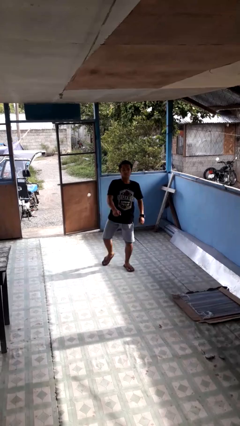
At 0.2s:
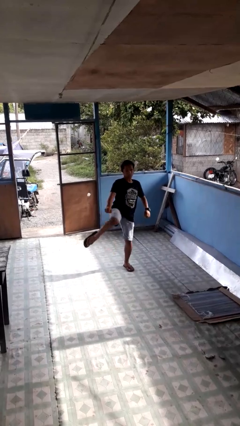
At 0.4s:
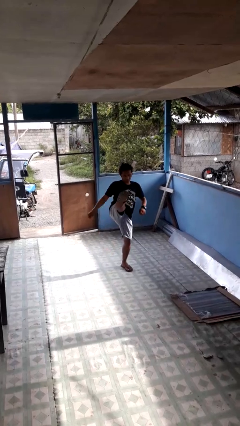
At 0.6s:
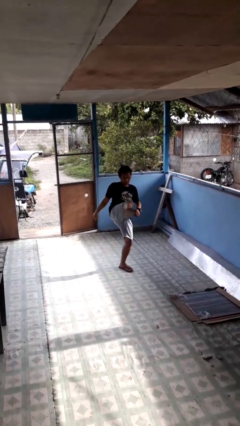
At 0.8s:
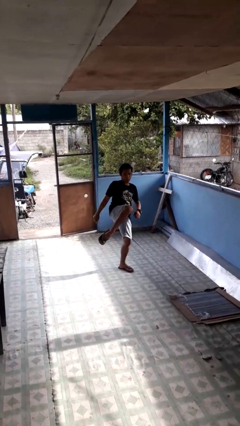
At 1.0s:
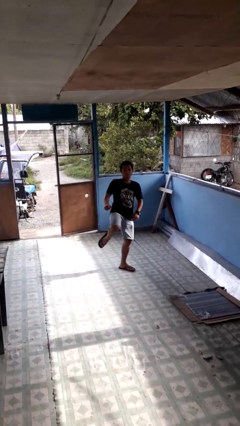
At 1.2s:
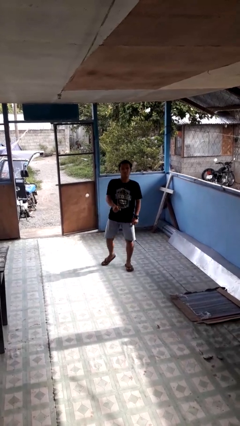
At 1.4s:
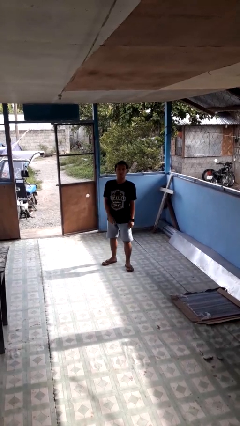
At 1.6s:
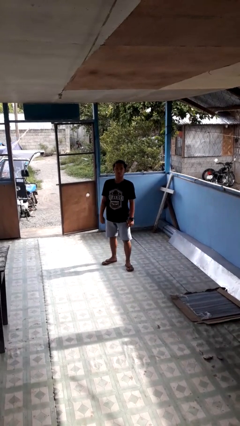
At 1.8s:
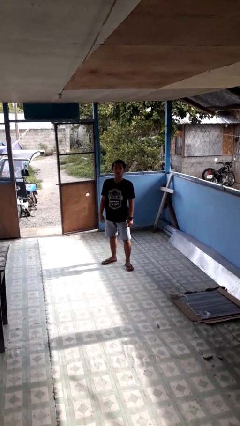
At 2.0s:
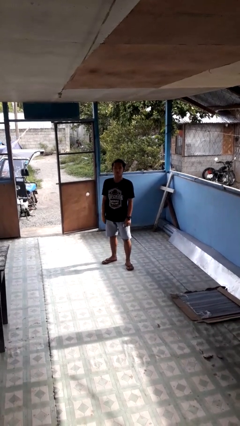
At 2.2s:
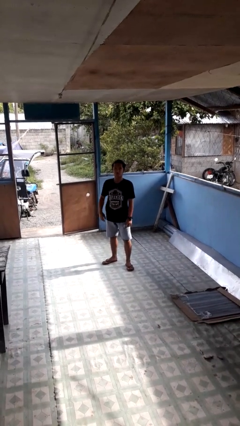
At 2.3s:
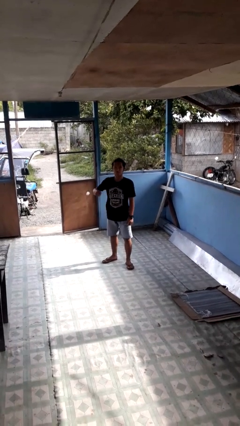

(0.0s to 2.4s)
person karate kicks

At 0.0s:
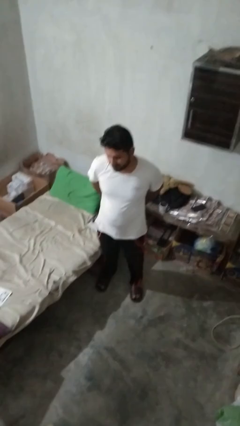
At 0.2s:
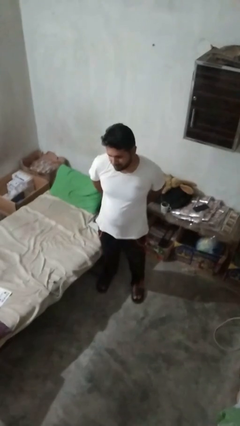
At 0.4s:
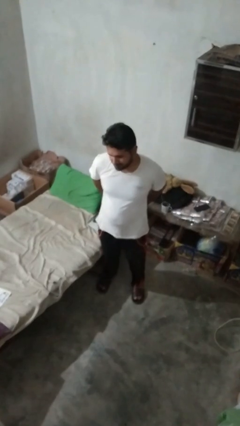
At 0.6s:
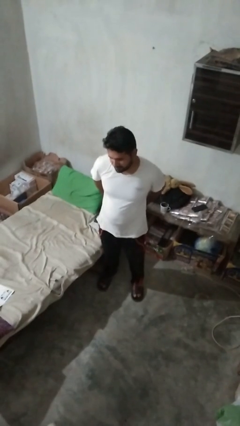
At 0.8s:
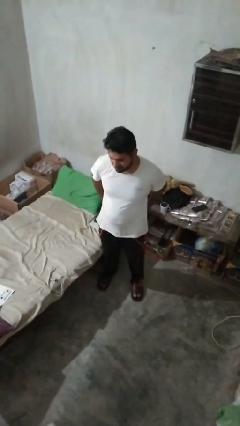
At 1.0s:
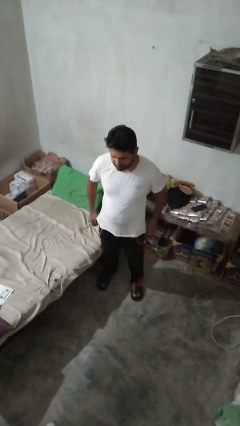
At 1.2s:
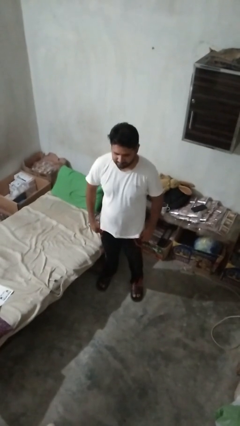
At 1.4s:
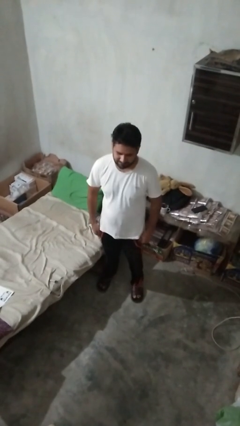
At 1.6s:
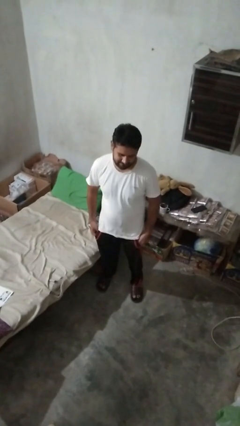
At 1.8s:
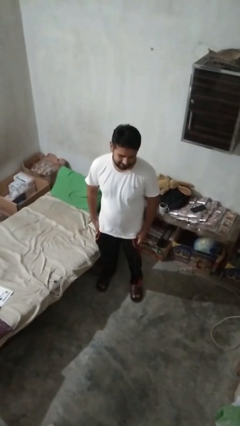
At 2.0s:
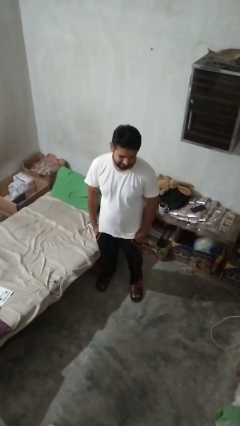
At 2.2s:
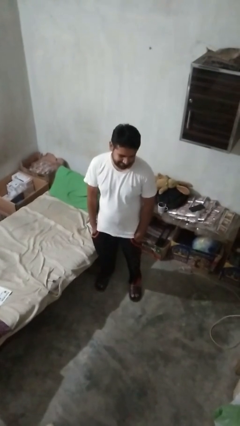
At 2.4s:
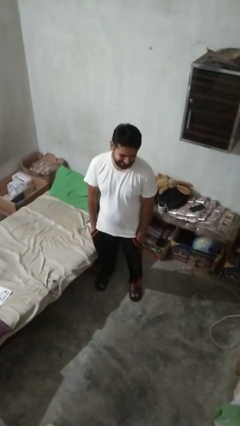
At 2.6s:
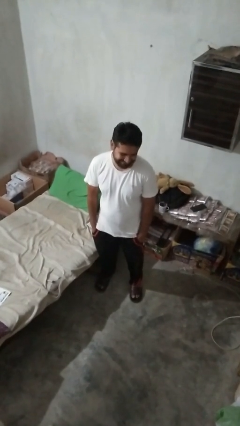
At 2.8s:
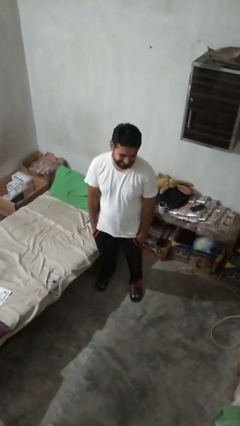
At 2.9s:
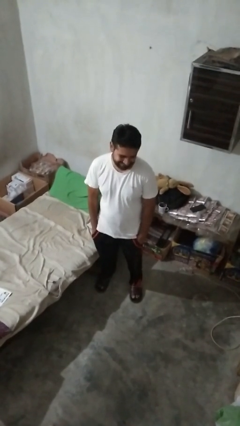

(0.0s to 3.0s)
person puts hands in back pockets

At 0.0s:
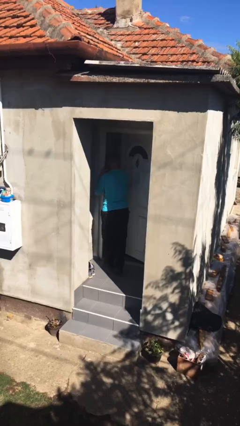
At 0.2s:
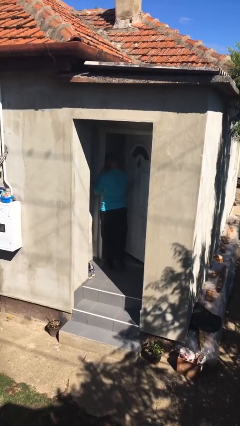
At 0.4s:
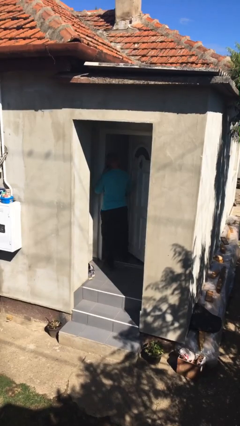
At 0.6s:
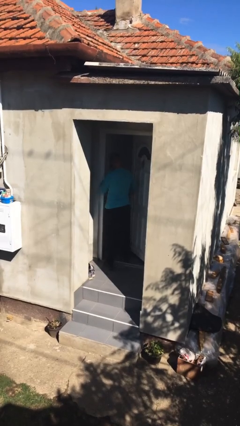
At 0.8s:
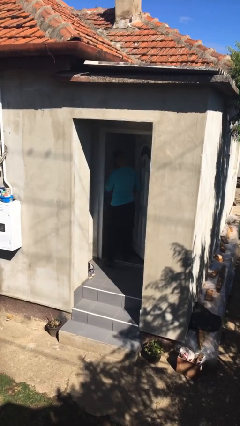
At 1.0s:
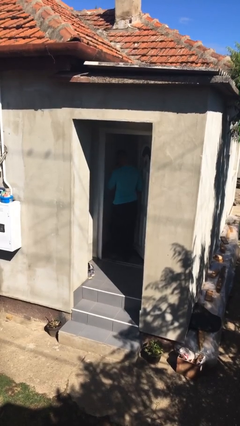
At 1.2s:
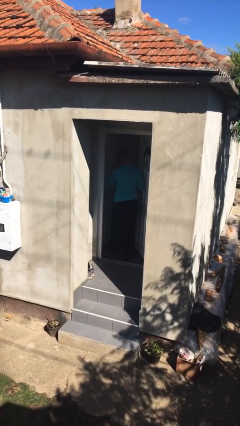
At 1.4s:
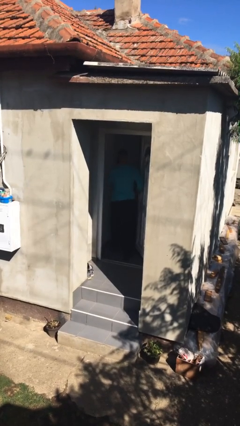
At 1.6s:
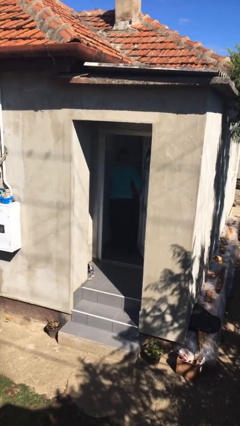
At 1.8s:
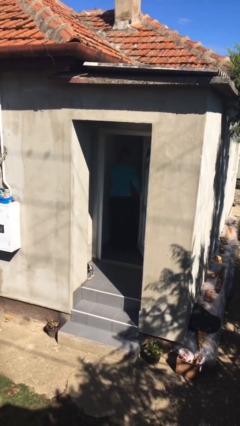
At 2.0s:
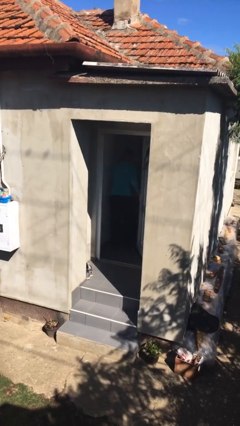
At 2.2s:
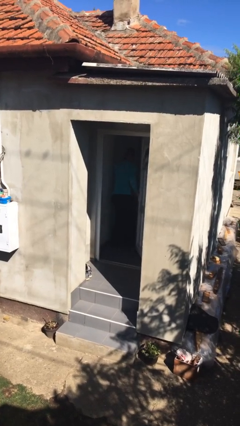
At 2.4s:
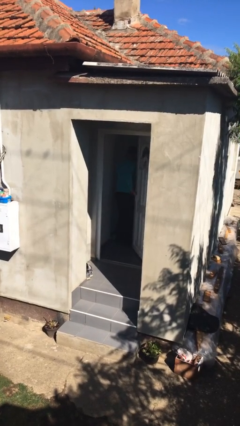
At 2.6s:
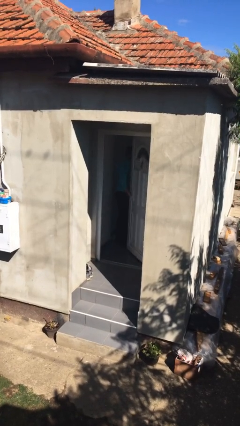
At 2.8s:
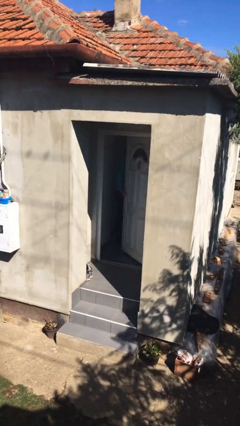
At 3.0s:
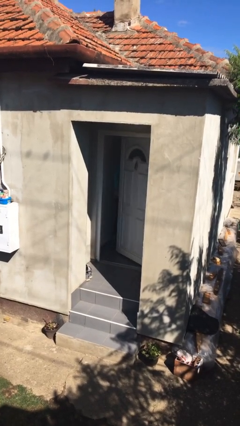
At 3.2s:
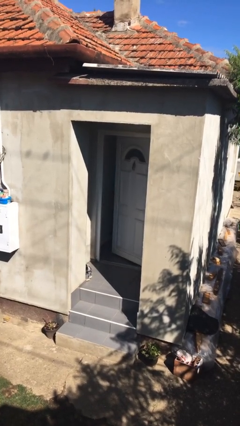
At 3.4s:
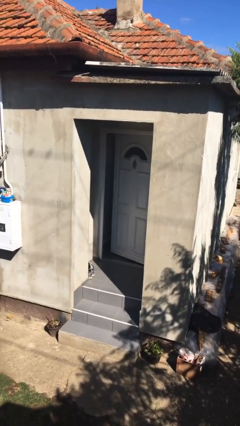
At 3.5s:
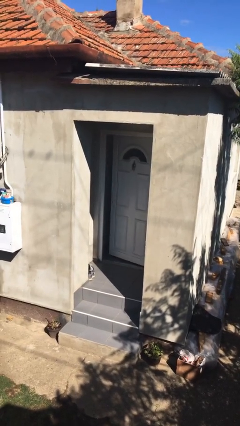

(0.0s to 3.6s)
person exits scene through structure

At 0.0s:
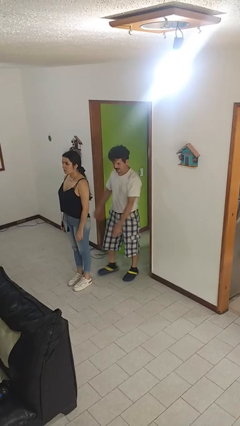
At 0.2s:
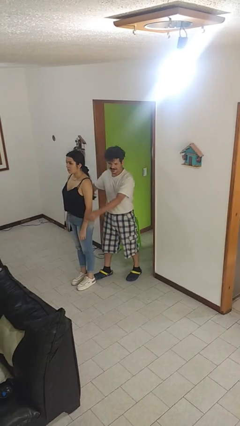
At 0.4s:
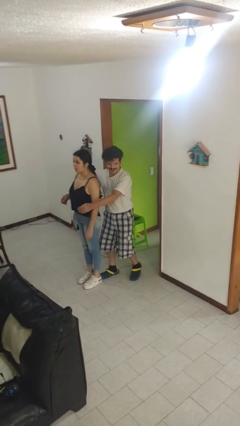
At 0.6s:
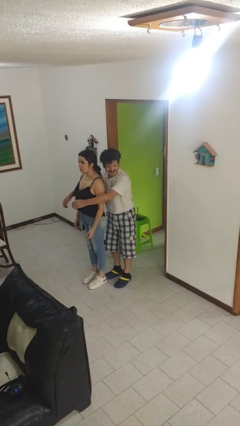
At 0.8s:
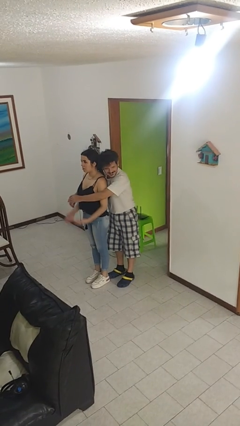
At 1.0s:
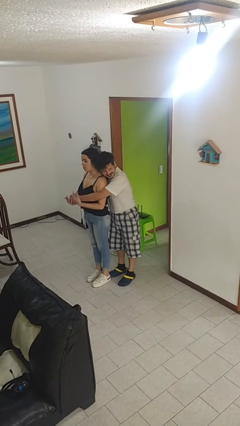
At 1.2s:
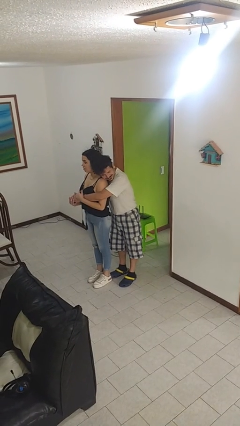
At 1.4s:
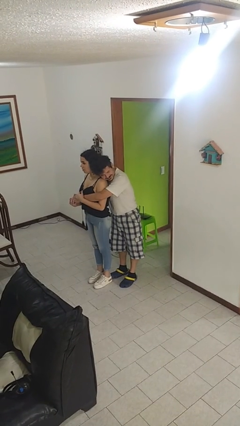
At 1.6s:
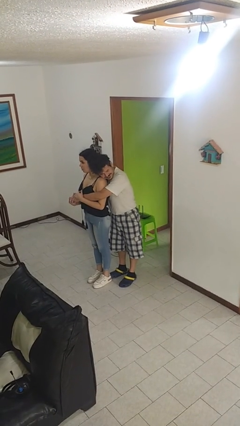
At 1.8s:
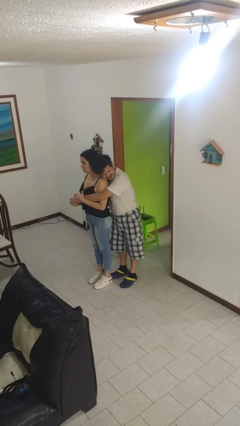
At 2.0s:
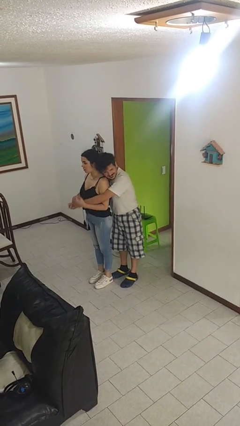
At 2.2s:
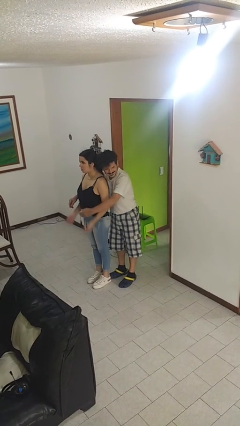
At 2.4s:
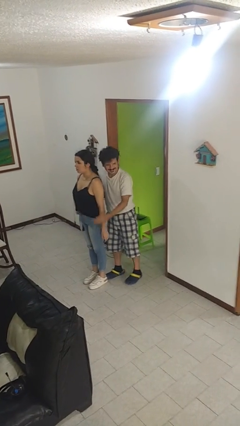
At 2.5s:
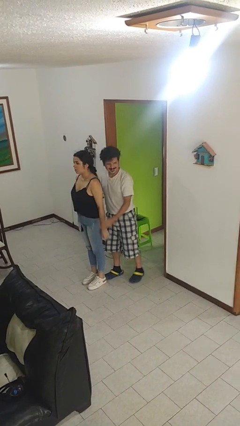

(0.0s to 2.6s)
person hugs person from behind

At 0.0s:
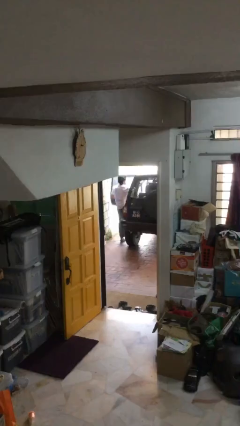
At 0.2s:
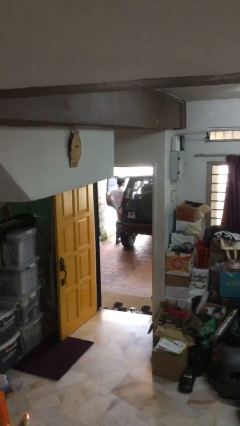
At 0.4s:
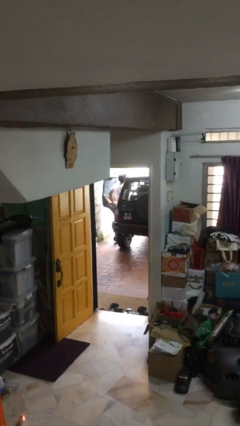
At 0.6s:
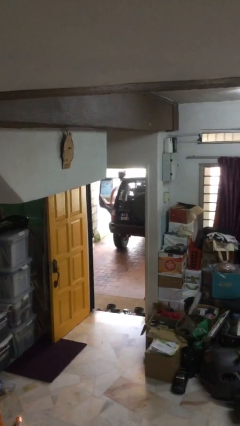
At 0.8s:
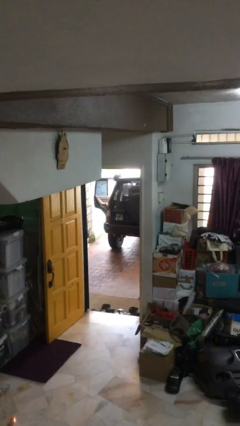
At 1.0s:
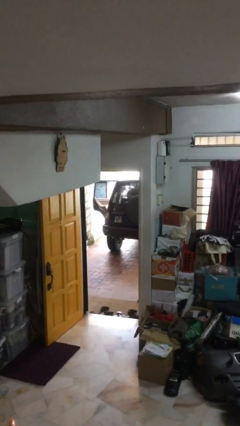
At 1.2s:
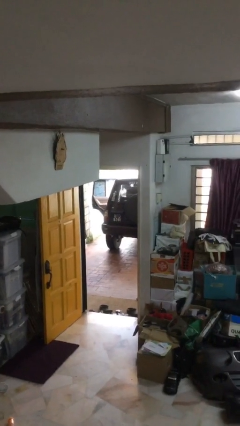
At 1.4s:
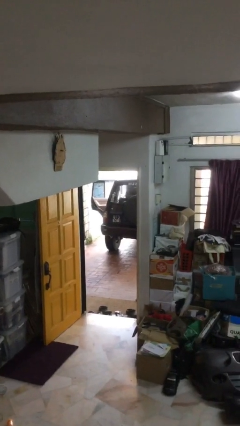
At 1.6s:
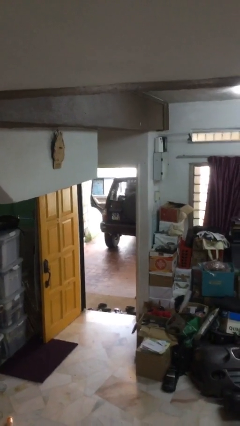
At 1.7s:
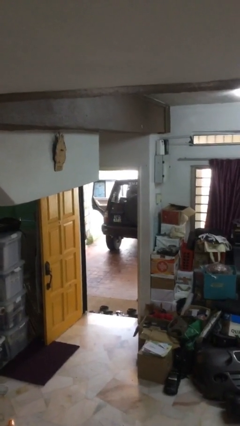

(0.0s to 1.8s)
person enters car

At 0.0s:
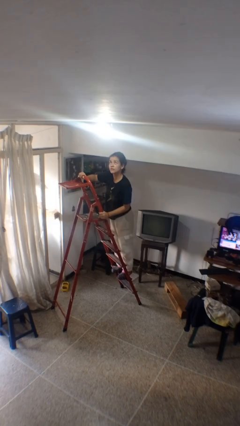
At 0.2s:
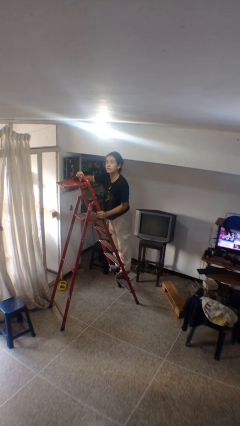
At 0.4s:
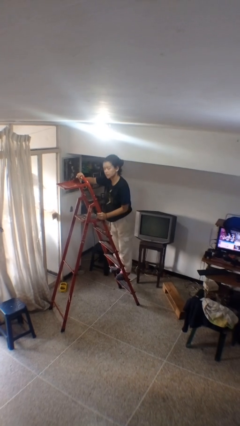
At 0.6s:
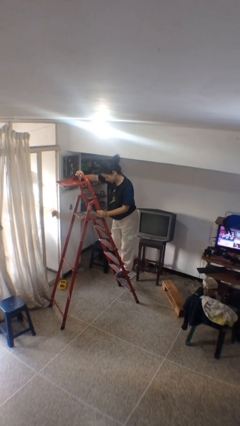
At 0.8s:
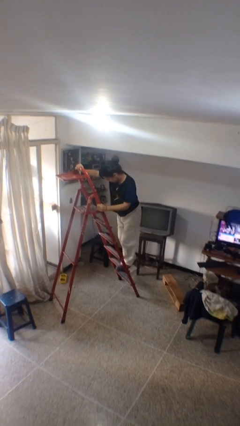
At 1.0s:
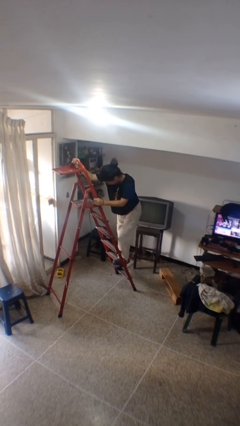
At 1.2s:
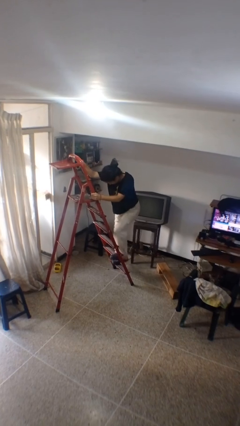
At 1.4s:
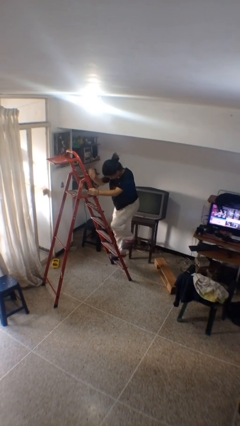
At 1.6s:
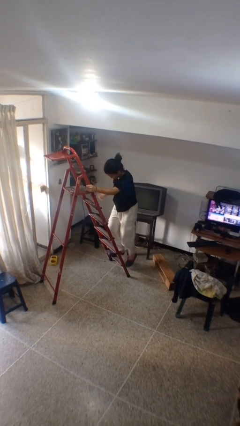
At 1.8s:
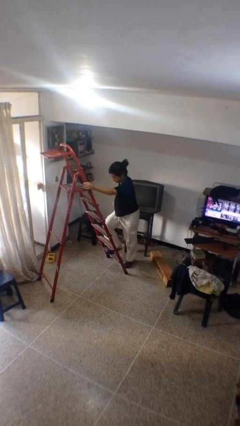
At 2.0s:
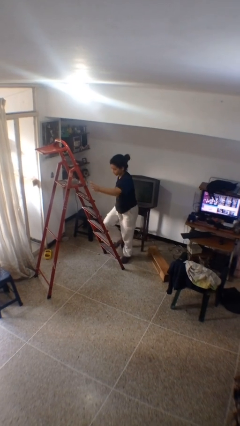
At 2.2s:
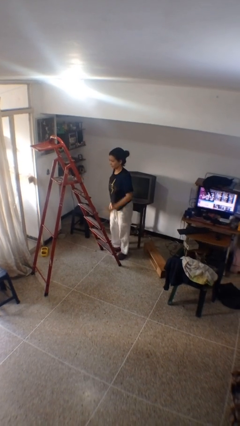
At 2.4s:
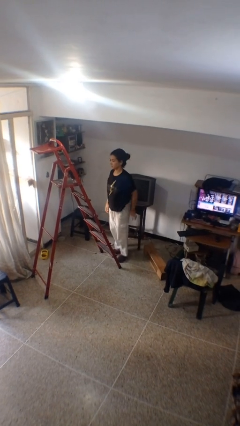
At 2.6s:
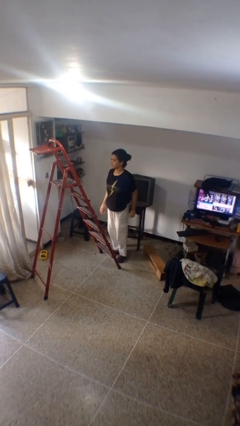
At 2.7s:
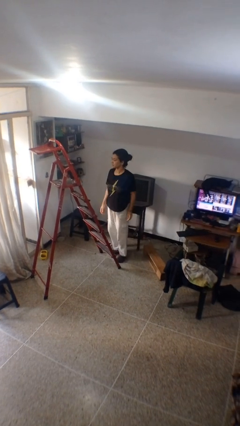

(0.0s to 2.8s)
person climbs down ladder

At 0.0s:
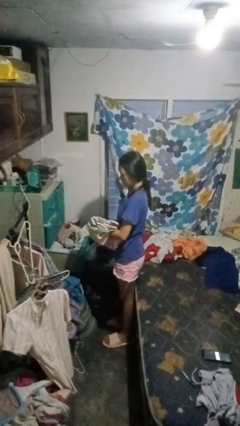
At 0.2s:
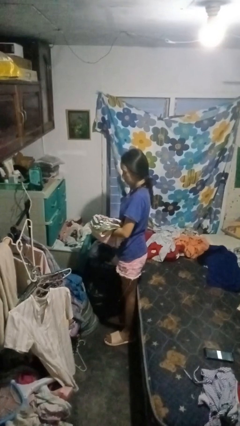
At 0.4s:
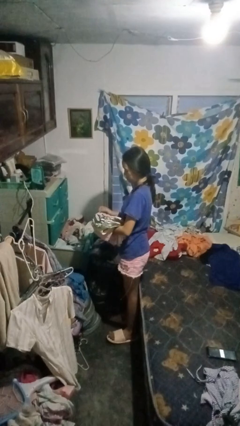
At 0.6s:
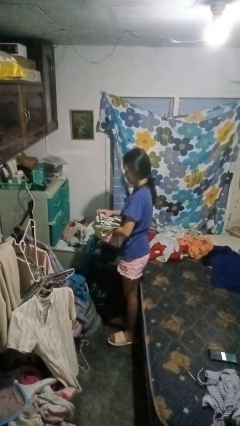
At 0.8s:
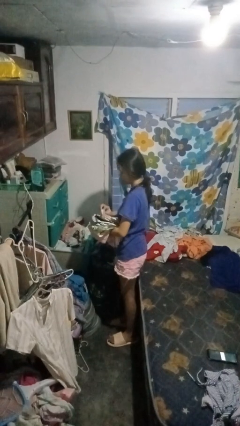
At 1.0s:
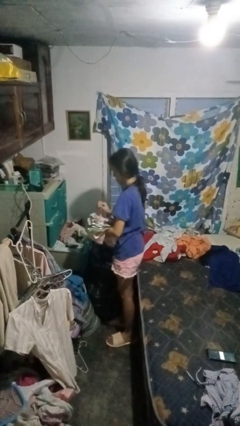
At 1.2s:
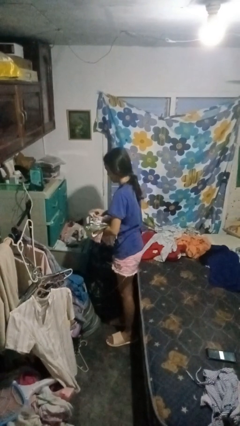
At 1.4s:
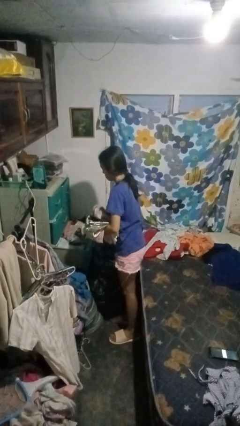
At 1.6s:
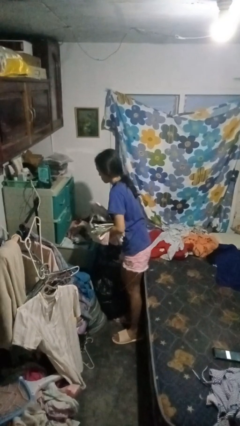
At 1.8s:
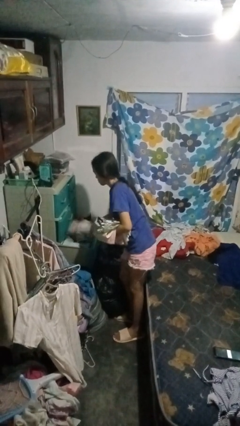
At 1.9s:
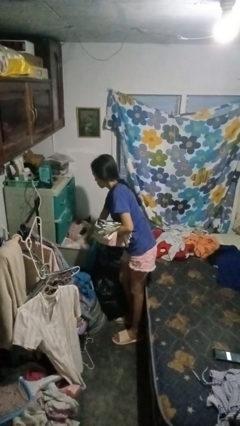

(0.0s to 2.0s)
person puts clothes into dresser
